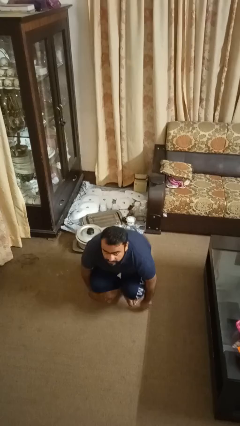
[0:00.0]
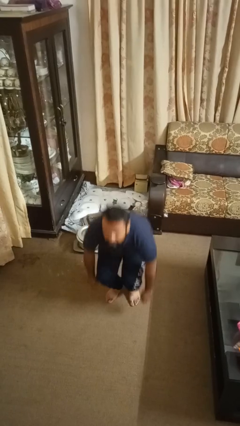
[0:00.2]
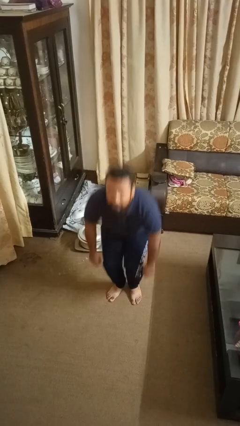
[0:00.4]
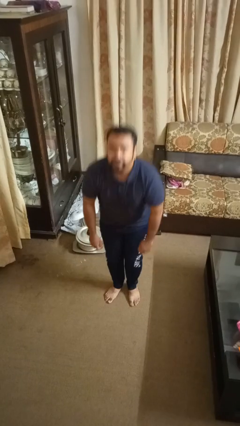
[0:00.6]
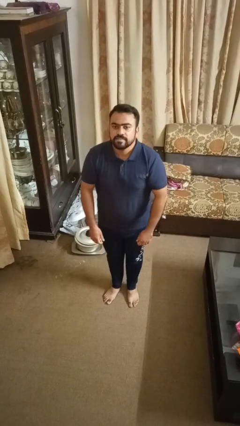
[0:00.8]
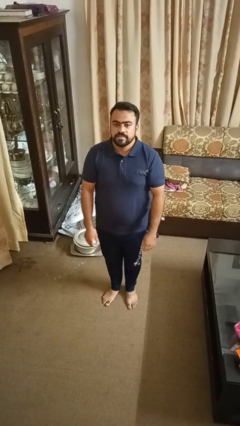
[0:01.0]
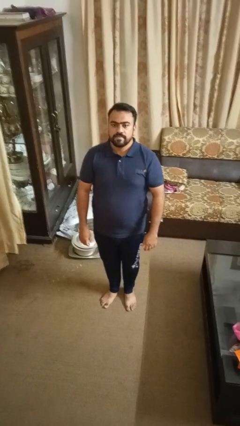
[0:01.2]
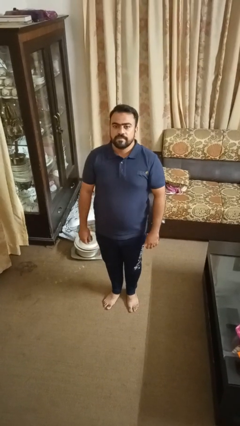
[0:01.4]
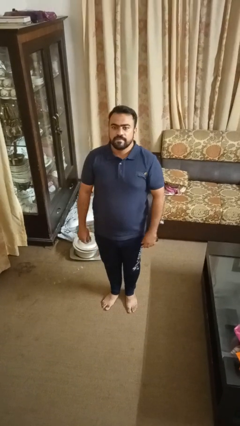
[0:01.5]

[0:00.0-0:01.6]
person stands up

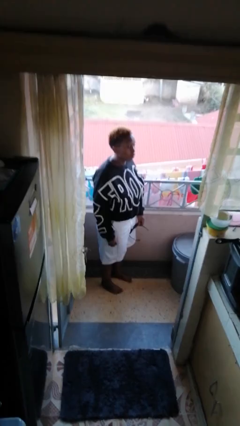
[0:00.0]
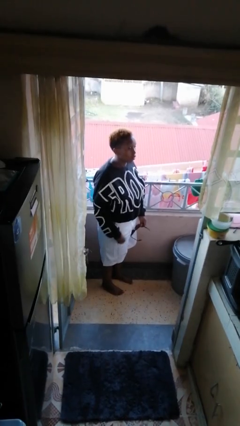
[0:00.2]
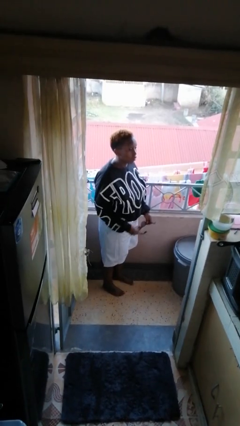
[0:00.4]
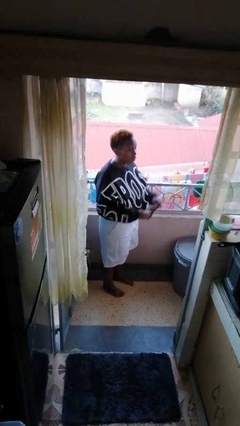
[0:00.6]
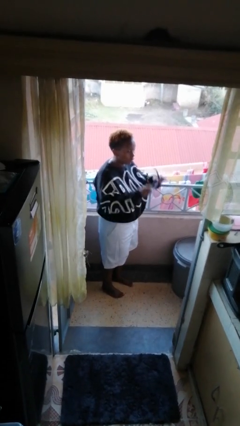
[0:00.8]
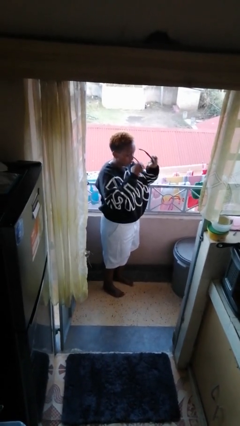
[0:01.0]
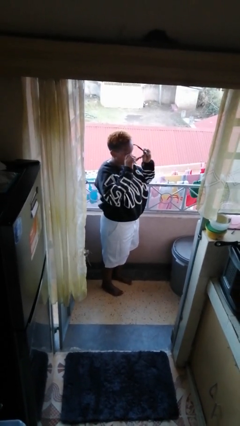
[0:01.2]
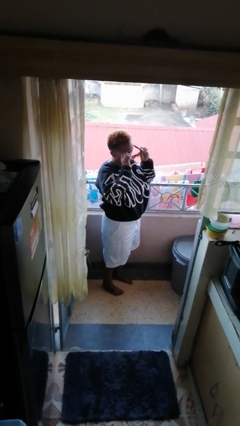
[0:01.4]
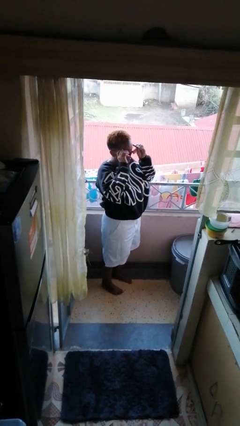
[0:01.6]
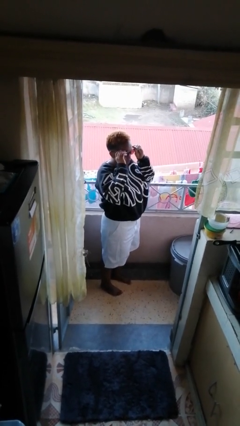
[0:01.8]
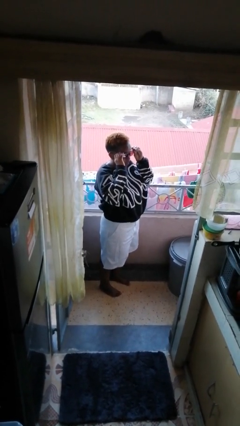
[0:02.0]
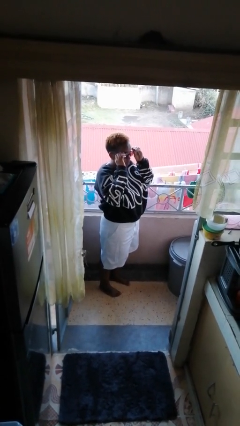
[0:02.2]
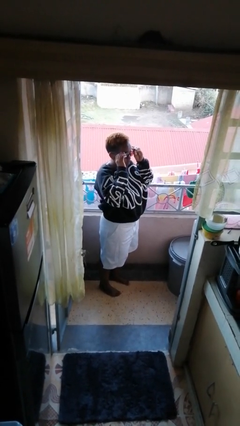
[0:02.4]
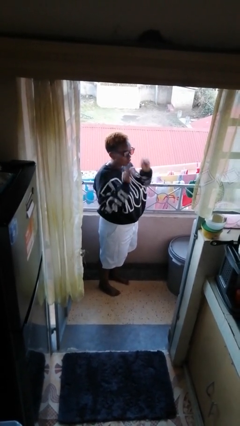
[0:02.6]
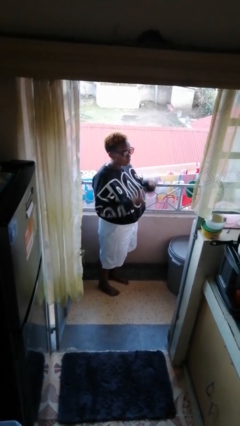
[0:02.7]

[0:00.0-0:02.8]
person puts on sunglasses

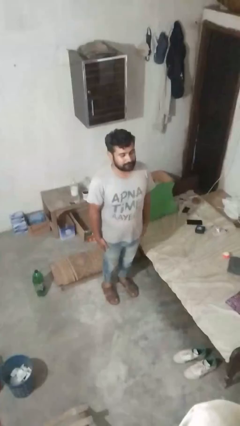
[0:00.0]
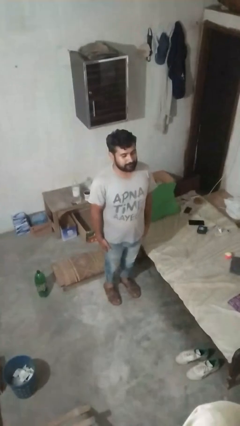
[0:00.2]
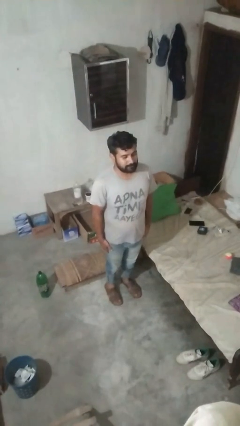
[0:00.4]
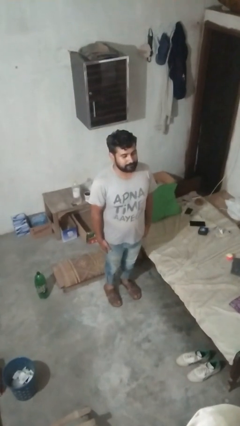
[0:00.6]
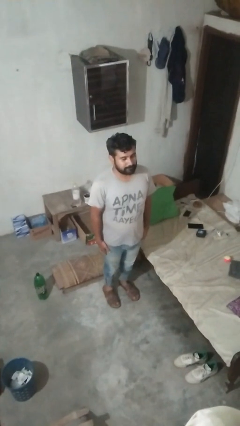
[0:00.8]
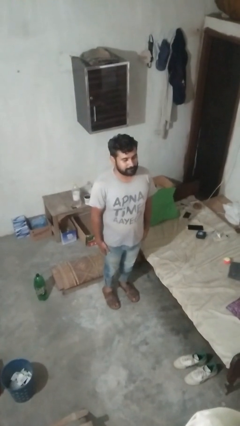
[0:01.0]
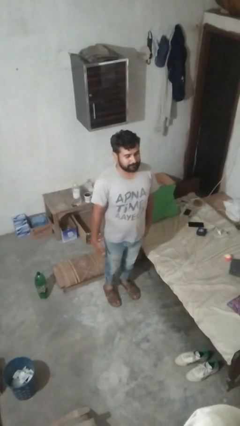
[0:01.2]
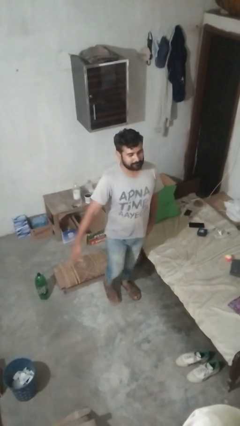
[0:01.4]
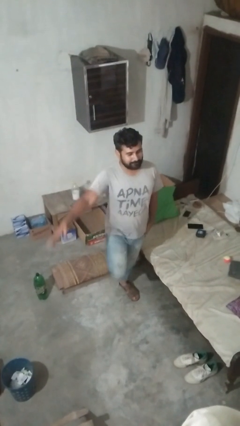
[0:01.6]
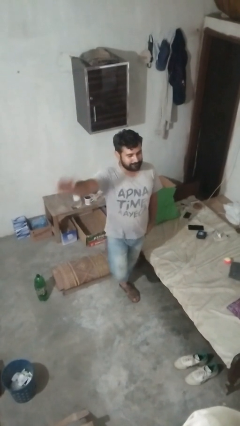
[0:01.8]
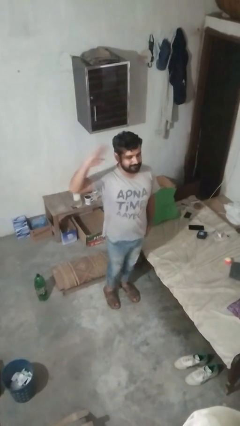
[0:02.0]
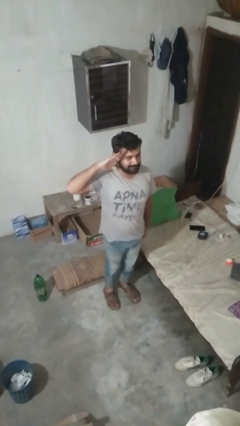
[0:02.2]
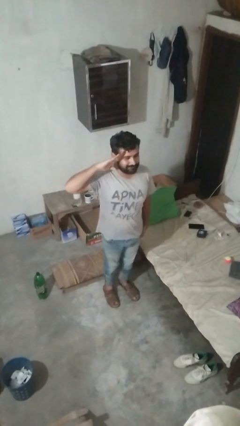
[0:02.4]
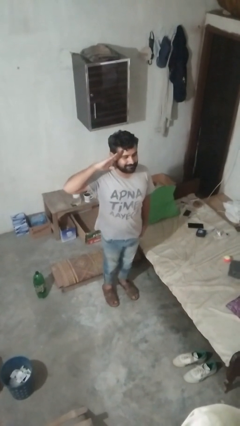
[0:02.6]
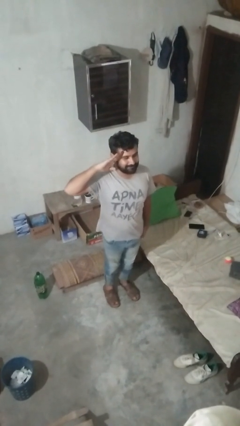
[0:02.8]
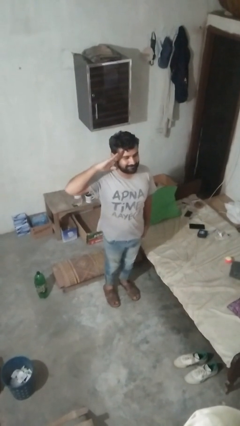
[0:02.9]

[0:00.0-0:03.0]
person salutes

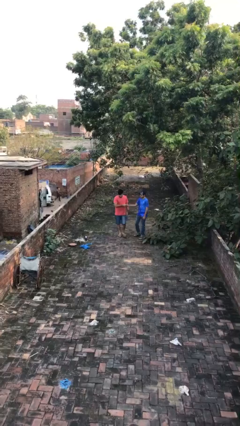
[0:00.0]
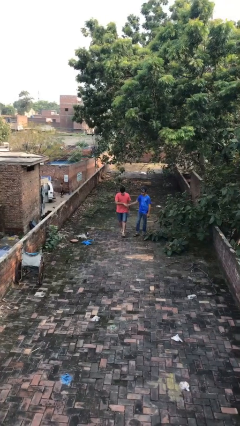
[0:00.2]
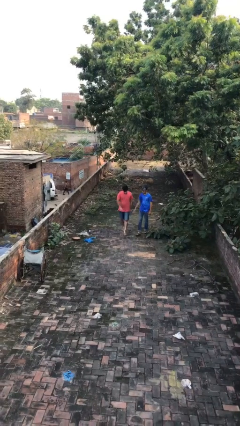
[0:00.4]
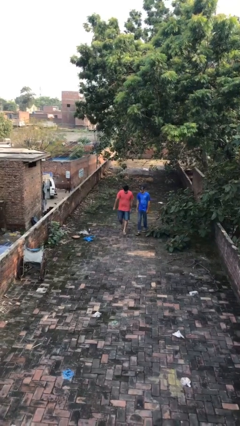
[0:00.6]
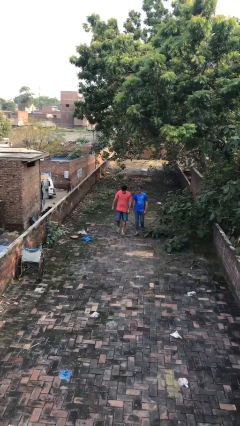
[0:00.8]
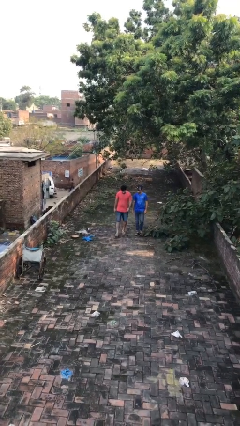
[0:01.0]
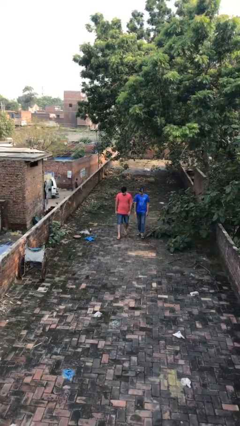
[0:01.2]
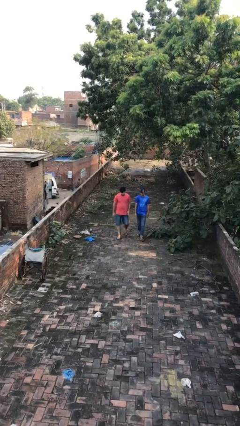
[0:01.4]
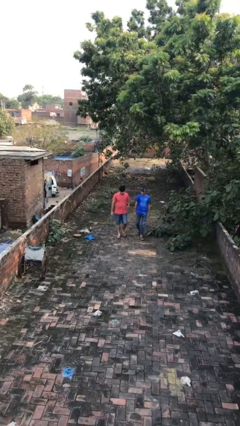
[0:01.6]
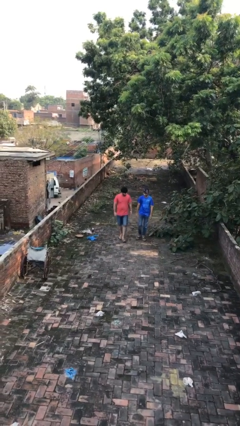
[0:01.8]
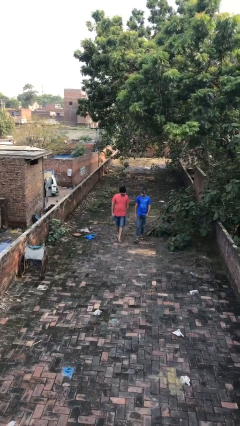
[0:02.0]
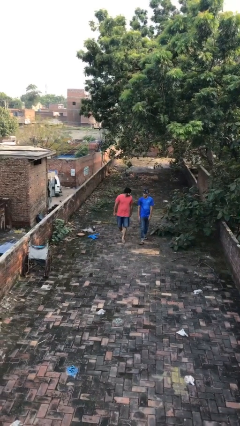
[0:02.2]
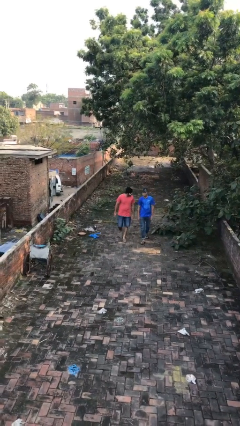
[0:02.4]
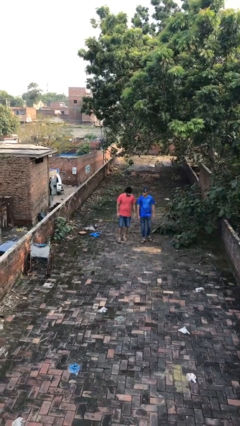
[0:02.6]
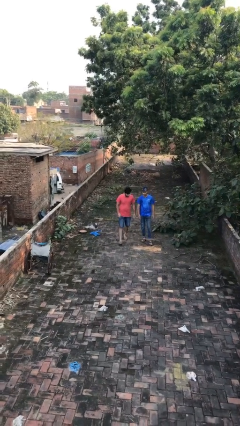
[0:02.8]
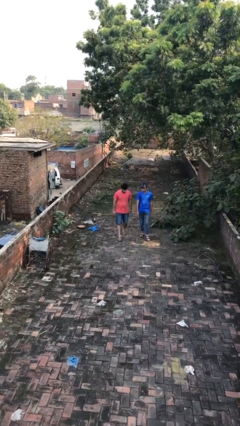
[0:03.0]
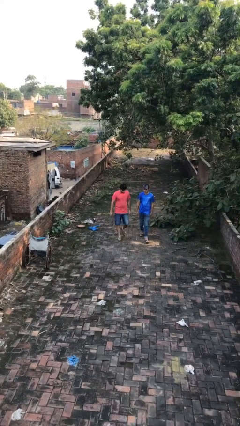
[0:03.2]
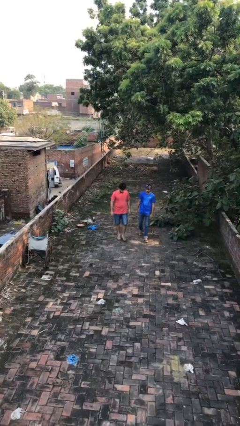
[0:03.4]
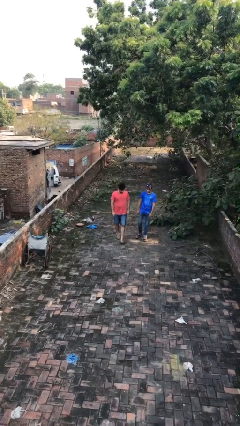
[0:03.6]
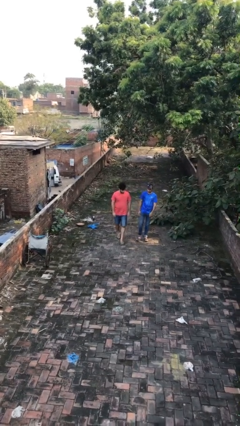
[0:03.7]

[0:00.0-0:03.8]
person talks to person

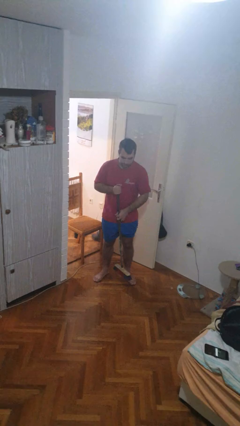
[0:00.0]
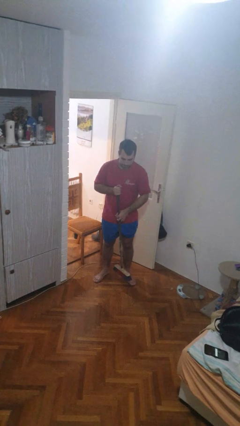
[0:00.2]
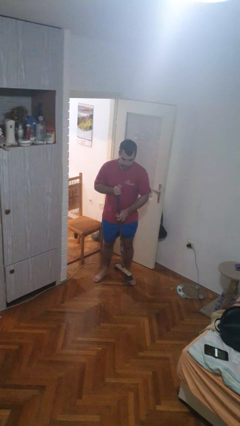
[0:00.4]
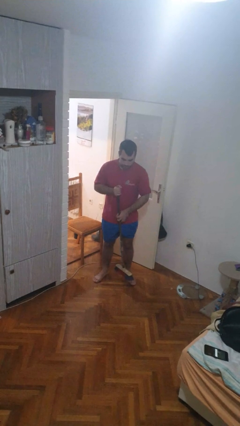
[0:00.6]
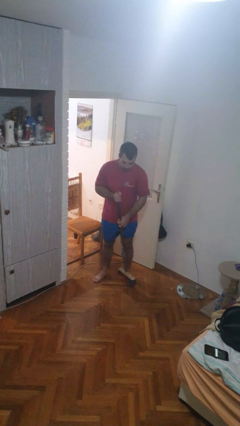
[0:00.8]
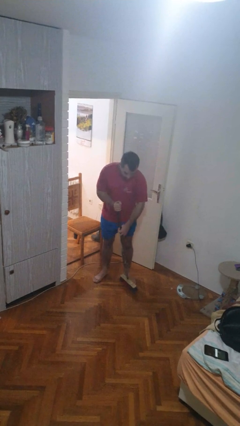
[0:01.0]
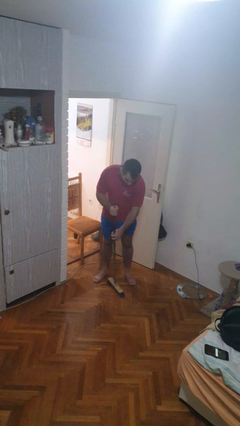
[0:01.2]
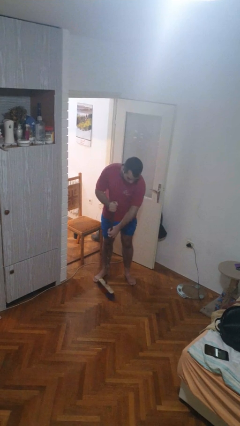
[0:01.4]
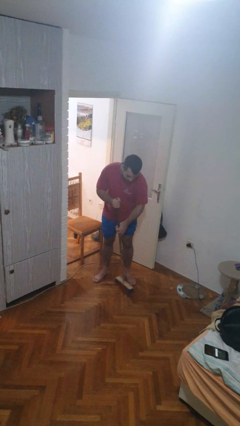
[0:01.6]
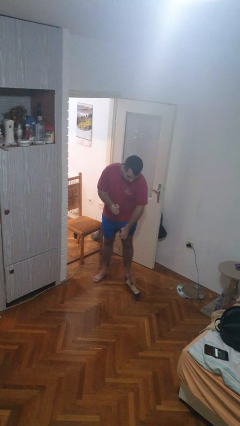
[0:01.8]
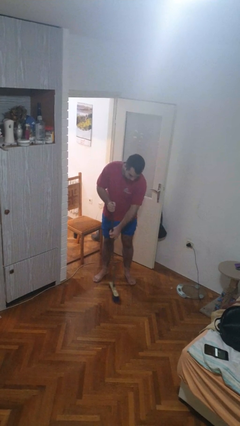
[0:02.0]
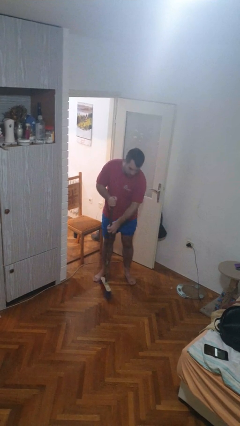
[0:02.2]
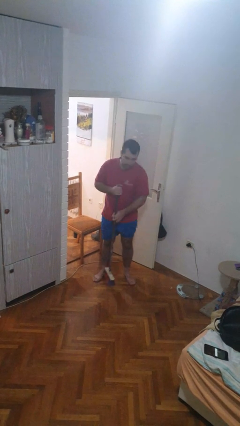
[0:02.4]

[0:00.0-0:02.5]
person sweeps floor

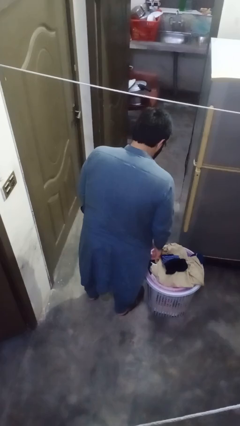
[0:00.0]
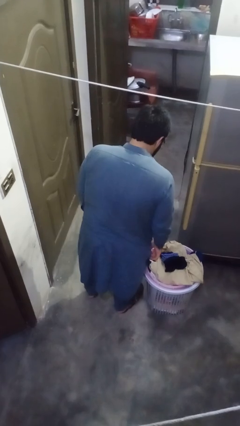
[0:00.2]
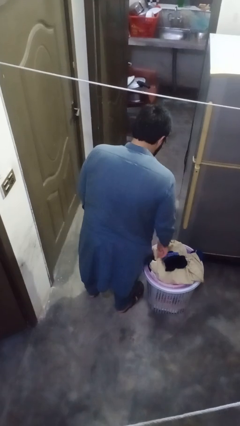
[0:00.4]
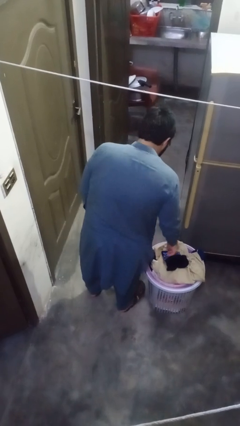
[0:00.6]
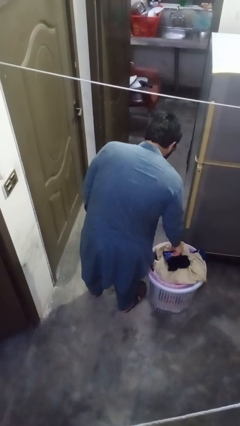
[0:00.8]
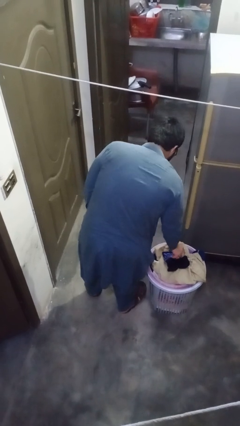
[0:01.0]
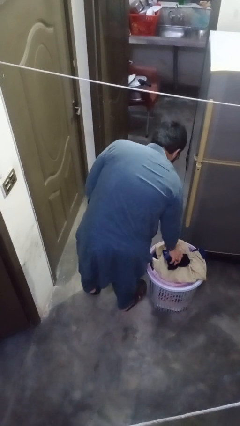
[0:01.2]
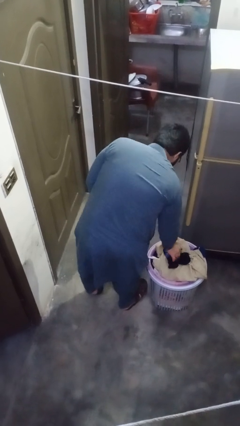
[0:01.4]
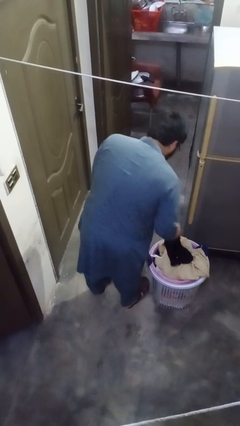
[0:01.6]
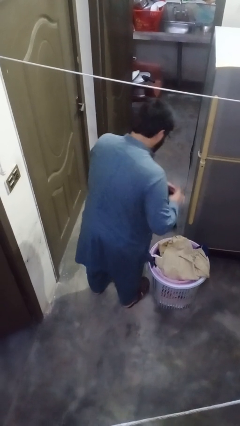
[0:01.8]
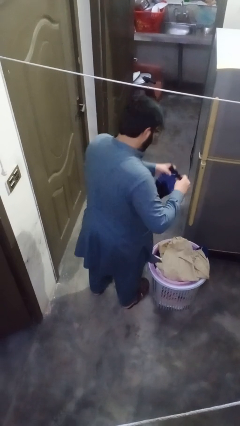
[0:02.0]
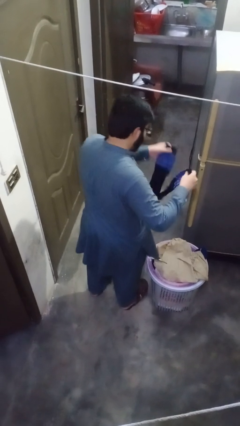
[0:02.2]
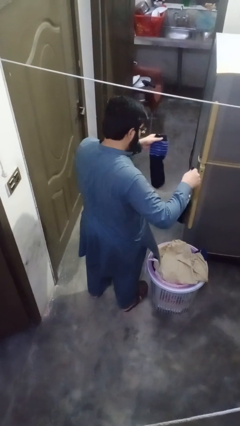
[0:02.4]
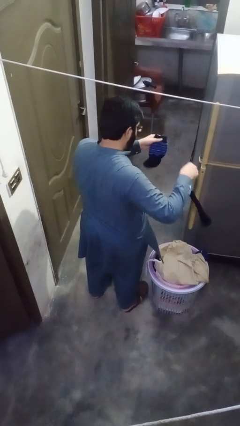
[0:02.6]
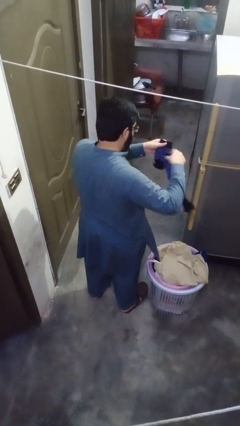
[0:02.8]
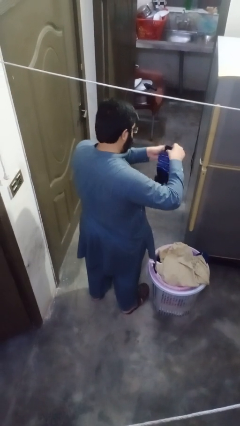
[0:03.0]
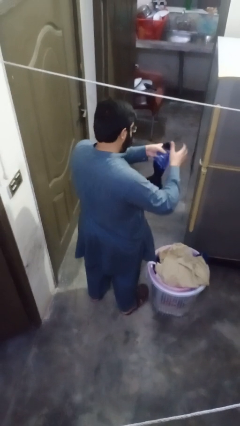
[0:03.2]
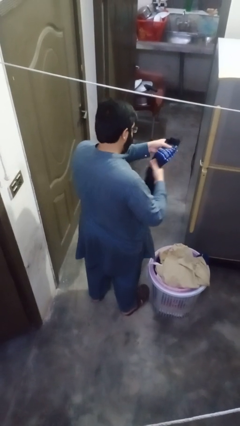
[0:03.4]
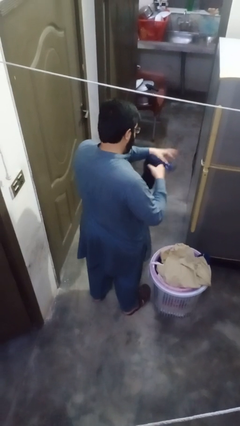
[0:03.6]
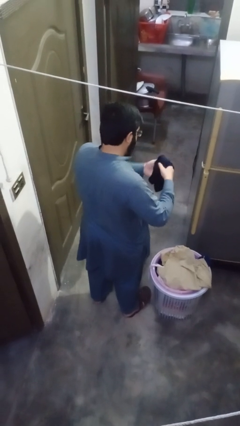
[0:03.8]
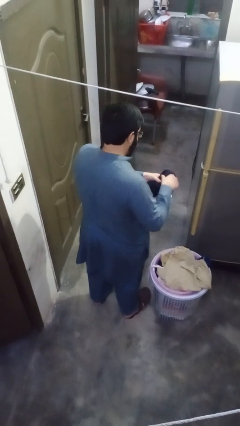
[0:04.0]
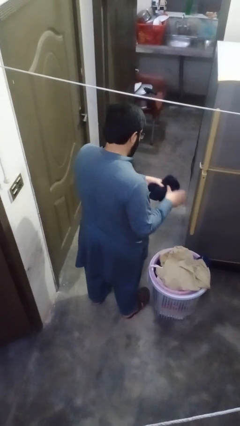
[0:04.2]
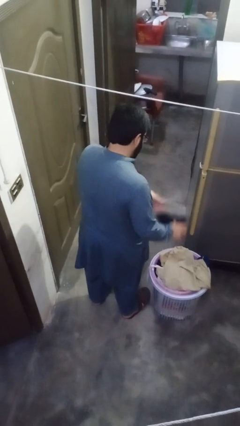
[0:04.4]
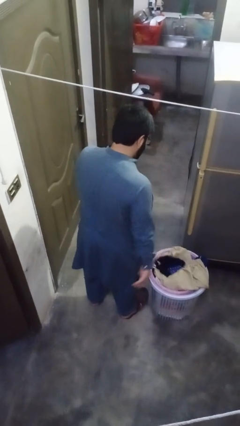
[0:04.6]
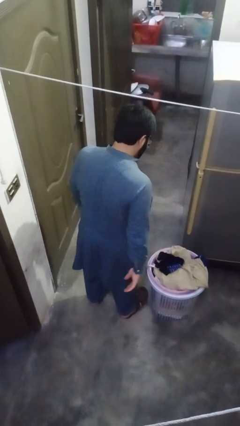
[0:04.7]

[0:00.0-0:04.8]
person folds socks
